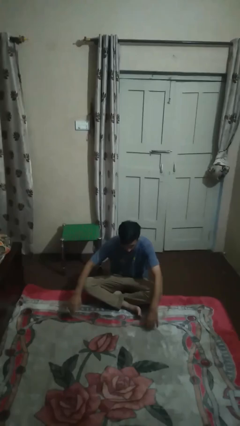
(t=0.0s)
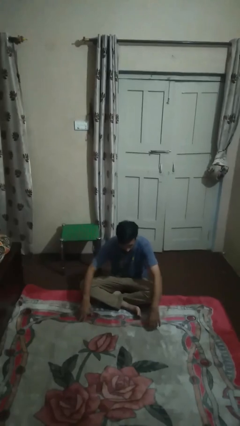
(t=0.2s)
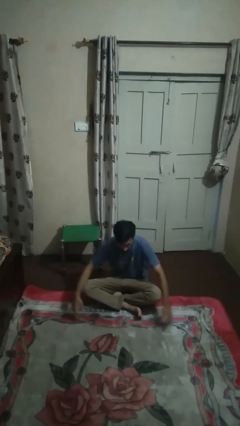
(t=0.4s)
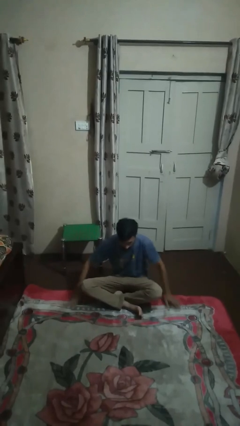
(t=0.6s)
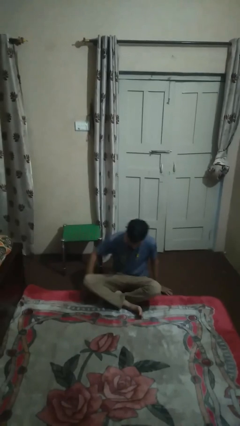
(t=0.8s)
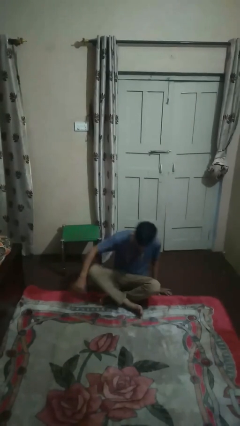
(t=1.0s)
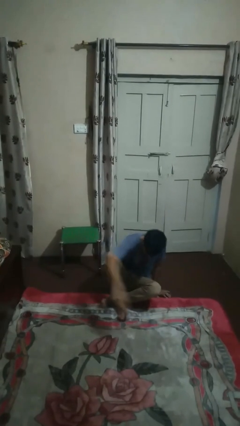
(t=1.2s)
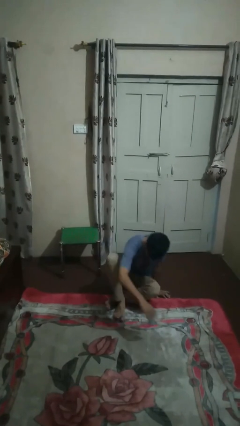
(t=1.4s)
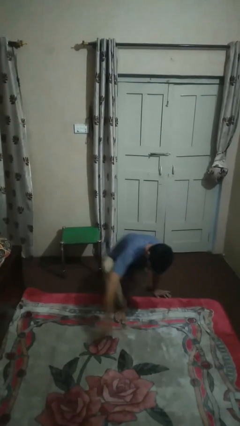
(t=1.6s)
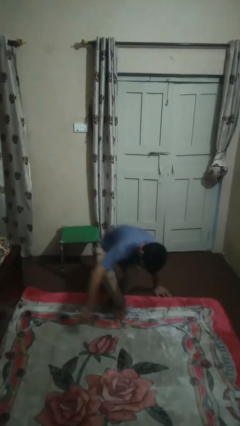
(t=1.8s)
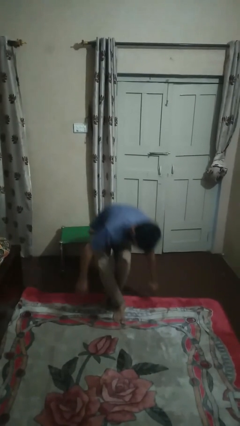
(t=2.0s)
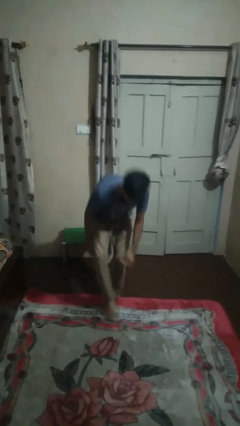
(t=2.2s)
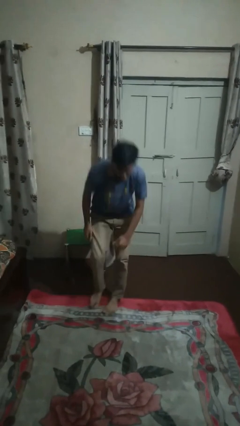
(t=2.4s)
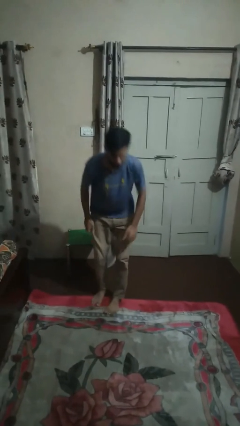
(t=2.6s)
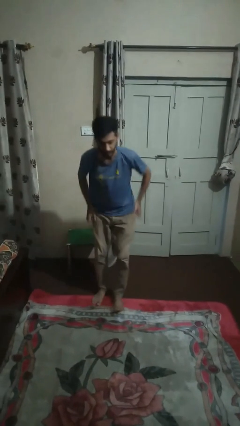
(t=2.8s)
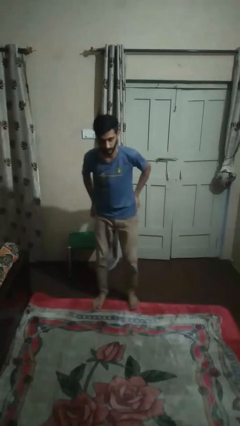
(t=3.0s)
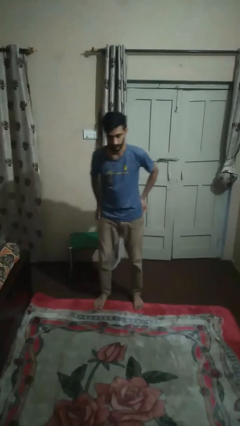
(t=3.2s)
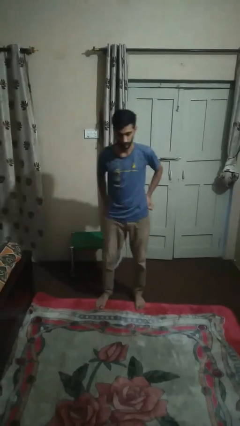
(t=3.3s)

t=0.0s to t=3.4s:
person stands up from floor

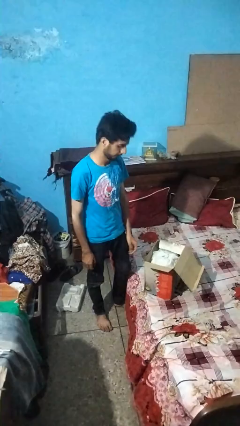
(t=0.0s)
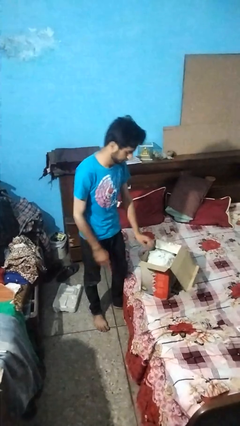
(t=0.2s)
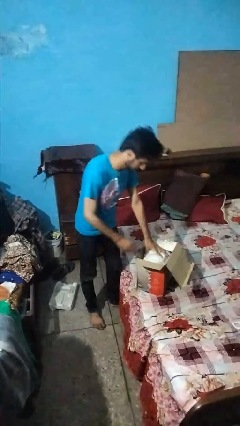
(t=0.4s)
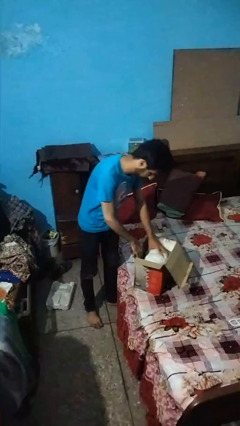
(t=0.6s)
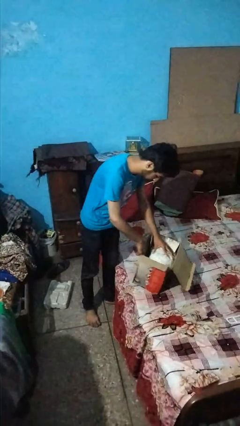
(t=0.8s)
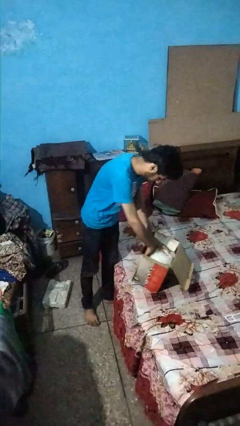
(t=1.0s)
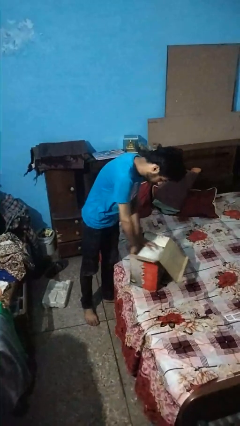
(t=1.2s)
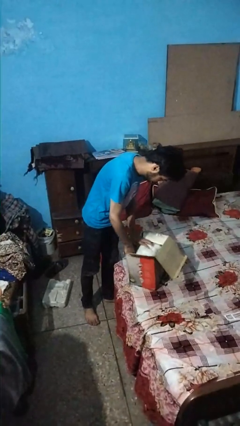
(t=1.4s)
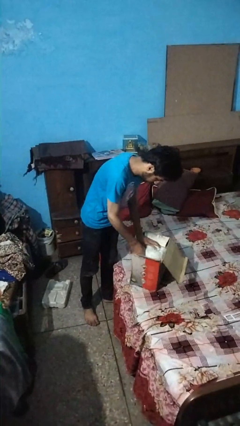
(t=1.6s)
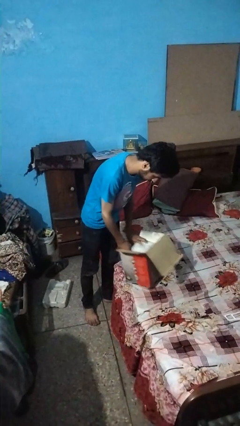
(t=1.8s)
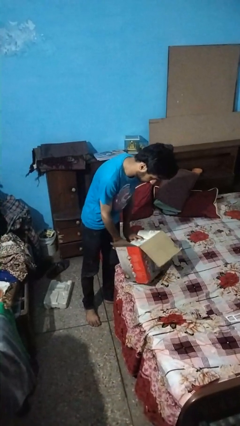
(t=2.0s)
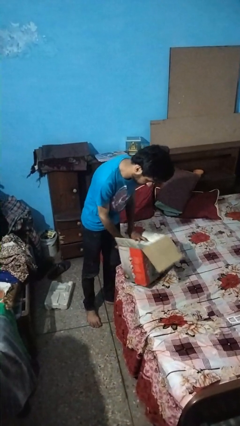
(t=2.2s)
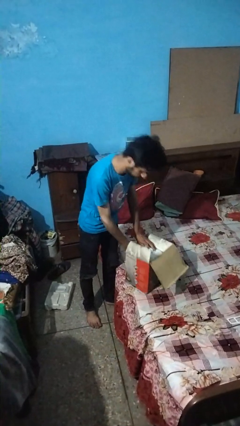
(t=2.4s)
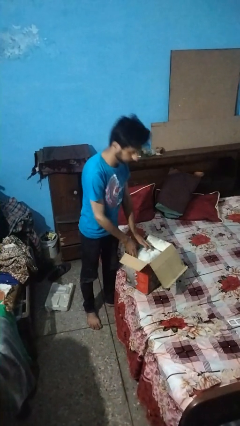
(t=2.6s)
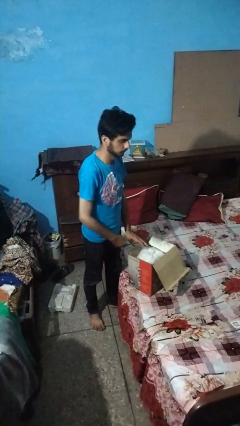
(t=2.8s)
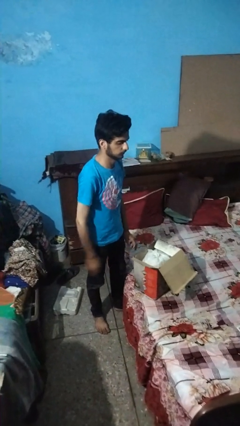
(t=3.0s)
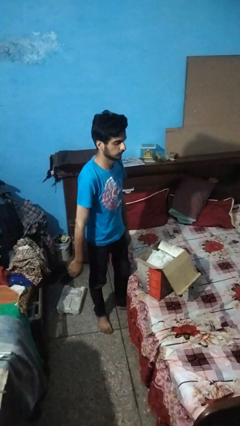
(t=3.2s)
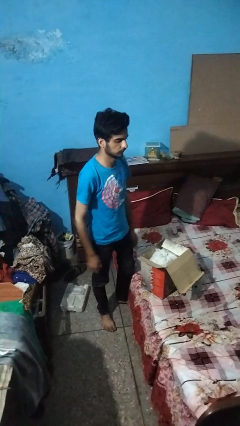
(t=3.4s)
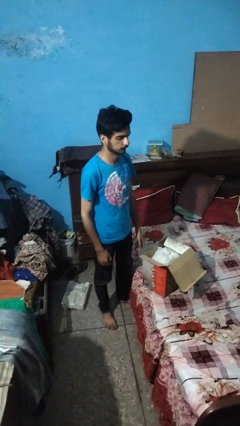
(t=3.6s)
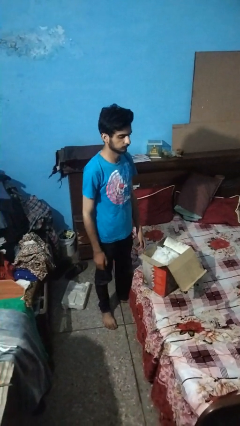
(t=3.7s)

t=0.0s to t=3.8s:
person searches in box

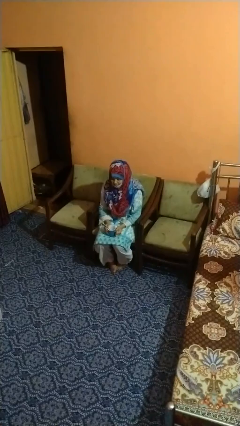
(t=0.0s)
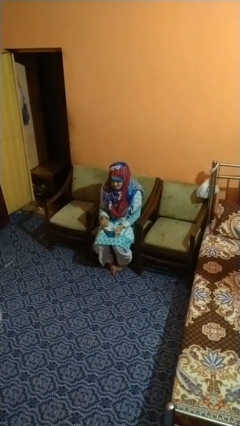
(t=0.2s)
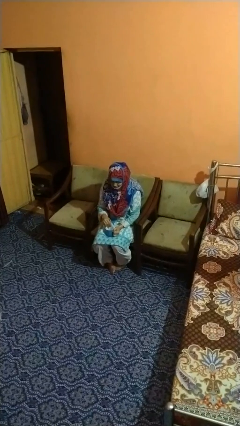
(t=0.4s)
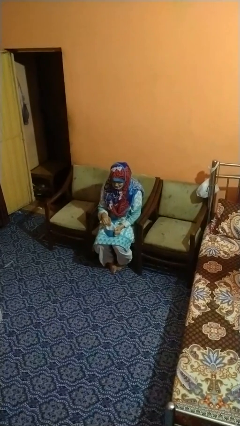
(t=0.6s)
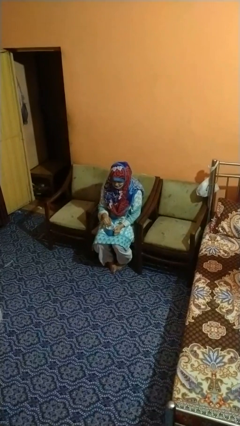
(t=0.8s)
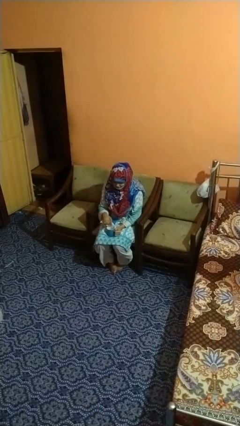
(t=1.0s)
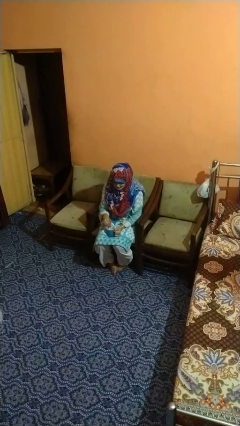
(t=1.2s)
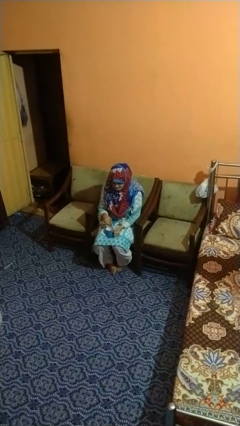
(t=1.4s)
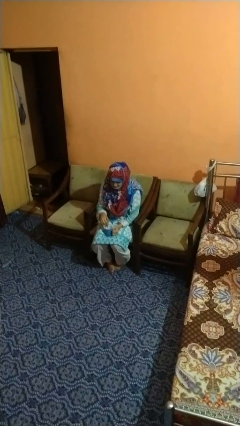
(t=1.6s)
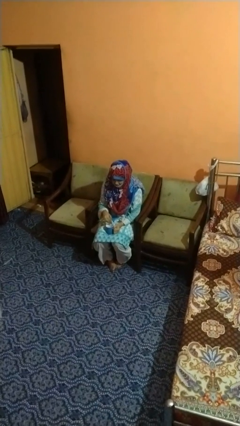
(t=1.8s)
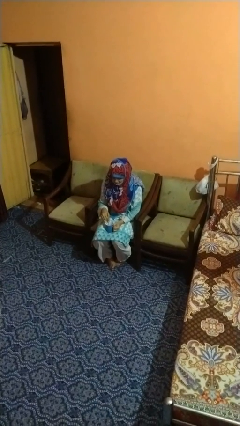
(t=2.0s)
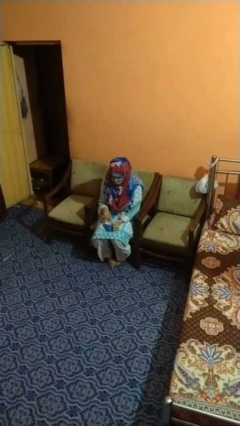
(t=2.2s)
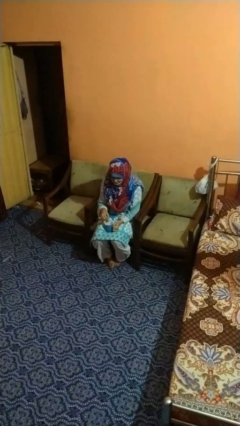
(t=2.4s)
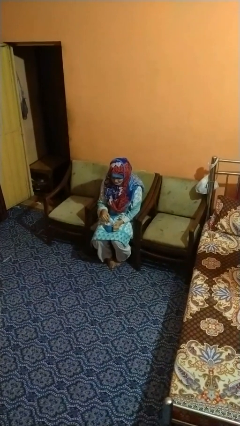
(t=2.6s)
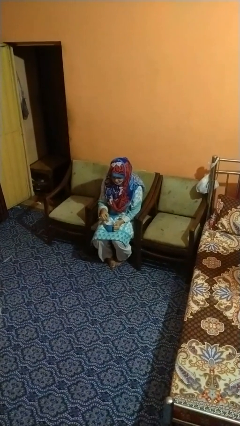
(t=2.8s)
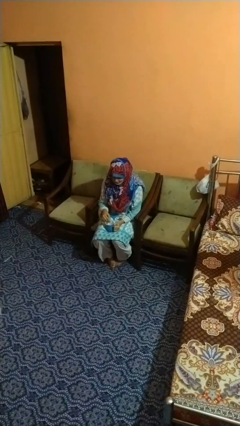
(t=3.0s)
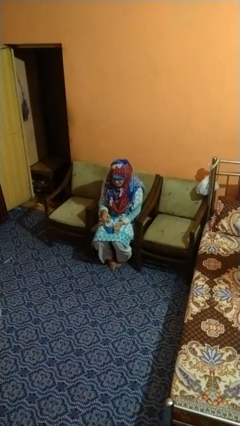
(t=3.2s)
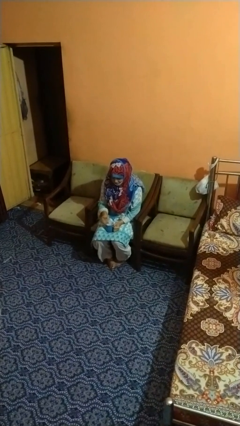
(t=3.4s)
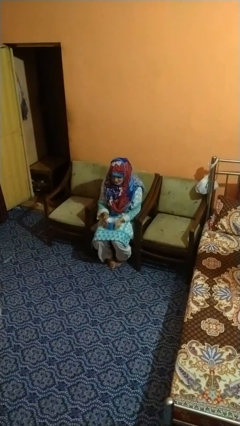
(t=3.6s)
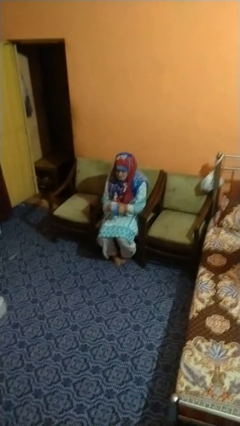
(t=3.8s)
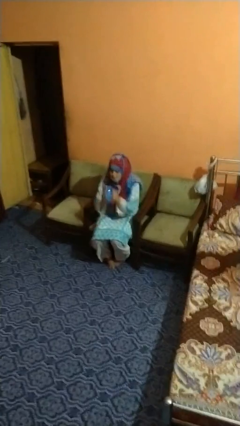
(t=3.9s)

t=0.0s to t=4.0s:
person stirs mug

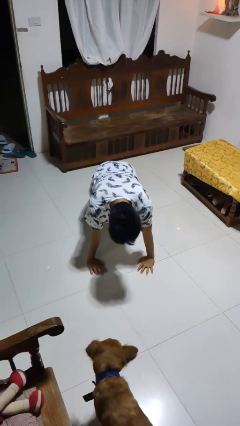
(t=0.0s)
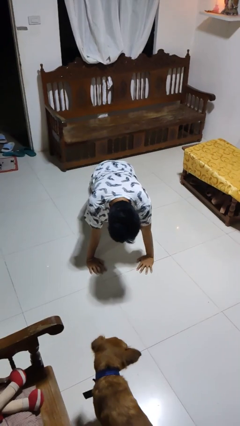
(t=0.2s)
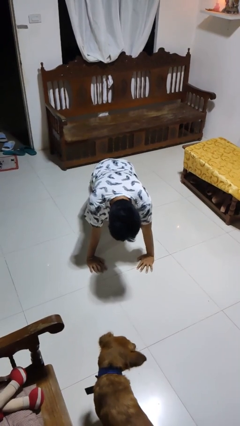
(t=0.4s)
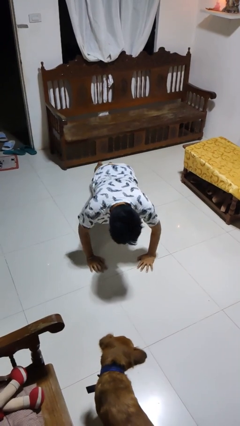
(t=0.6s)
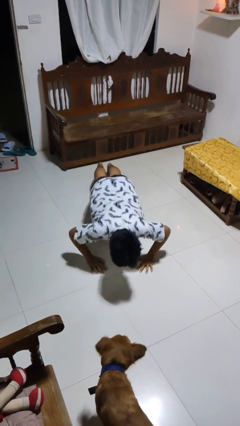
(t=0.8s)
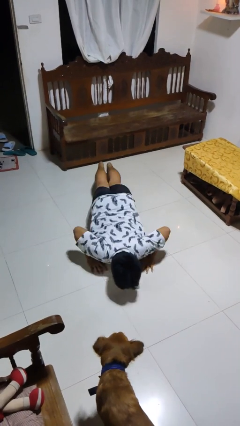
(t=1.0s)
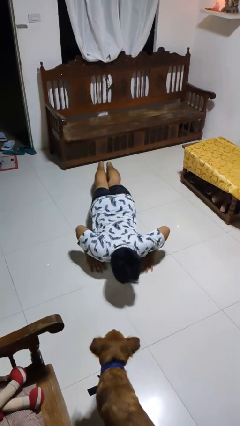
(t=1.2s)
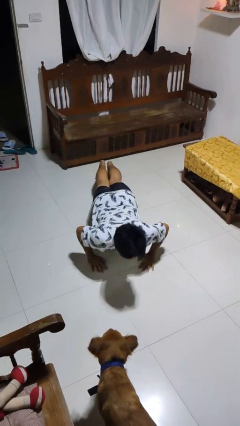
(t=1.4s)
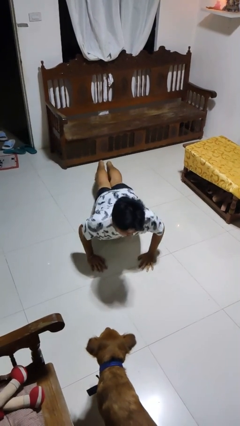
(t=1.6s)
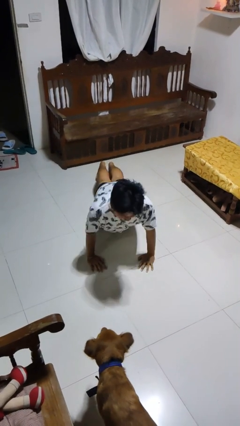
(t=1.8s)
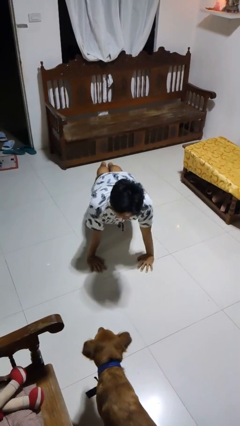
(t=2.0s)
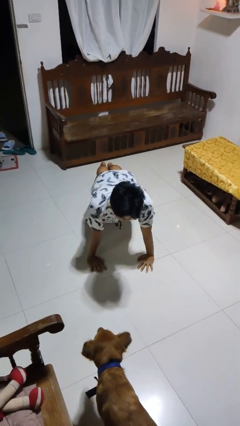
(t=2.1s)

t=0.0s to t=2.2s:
person exercises with pushup

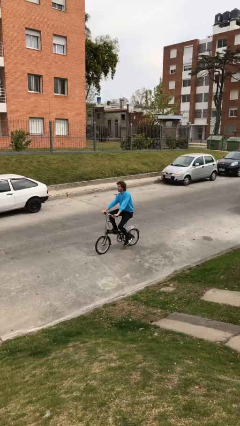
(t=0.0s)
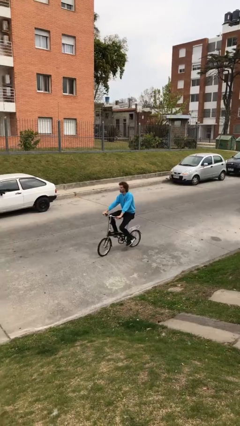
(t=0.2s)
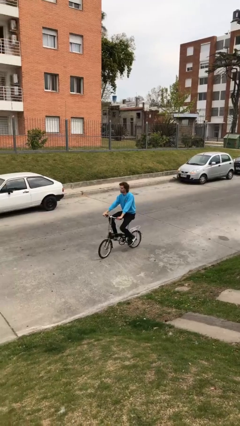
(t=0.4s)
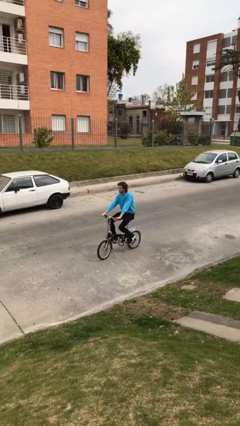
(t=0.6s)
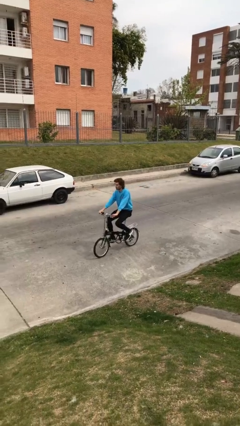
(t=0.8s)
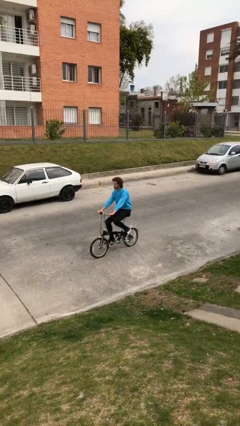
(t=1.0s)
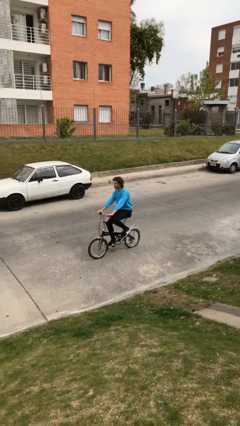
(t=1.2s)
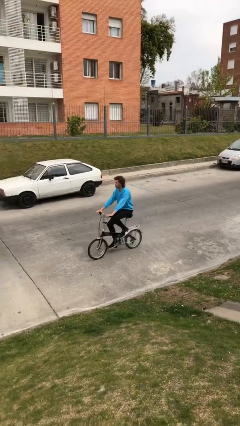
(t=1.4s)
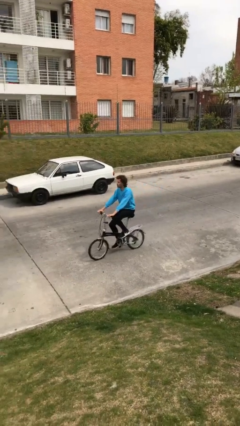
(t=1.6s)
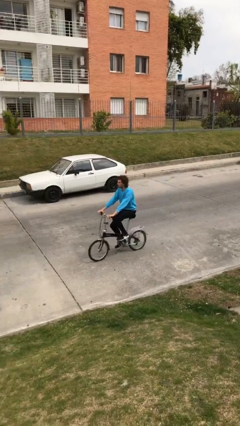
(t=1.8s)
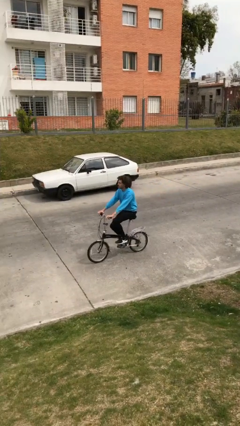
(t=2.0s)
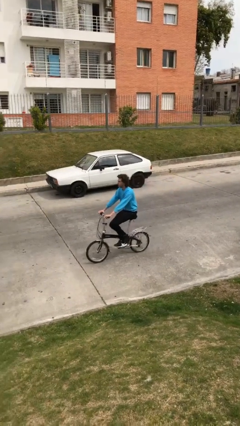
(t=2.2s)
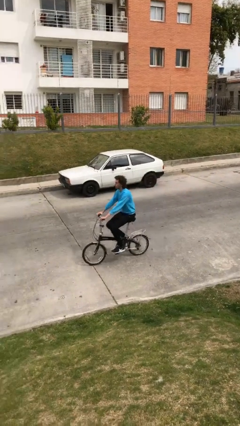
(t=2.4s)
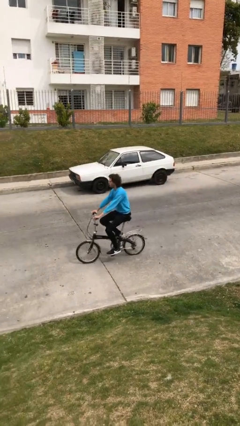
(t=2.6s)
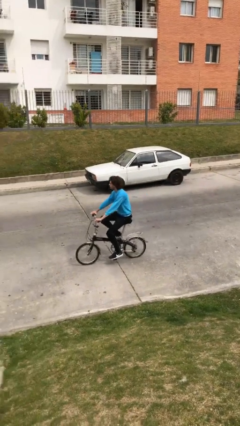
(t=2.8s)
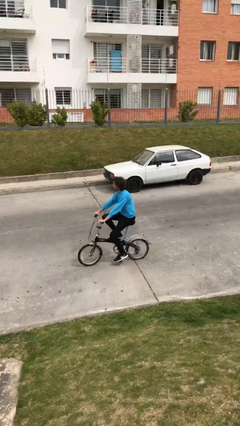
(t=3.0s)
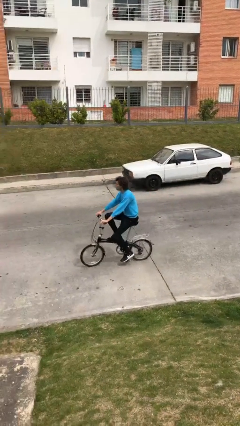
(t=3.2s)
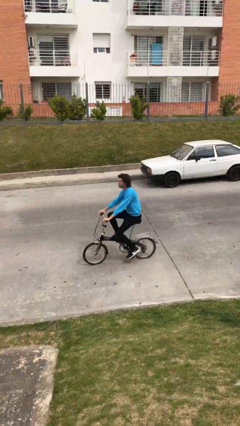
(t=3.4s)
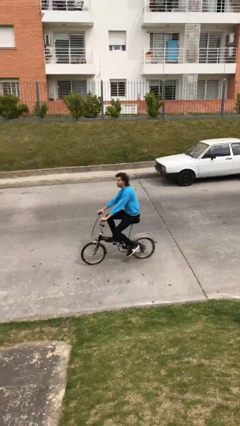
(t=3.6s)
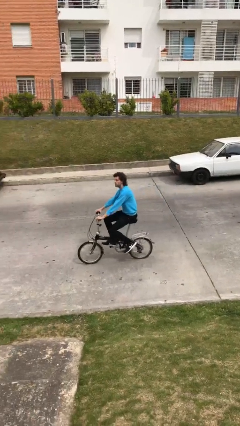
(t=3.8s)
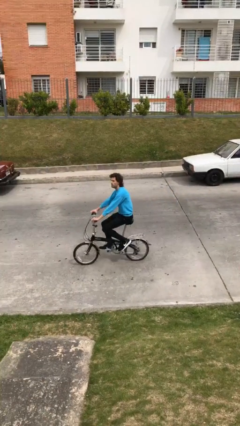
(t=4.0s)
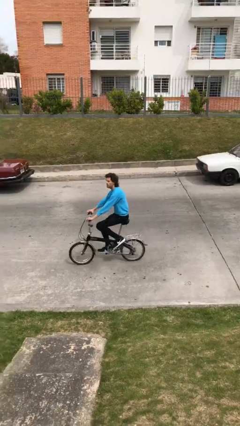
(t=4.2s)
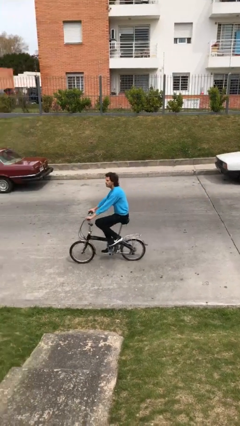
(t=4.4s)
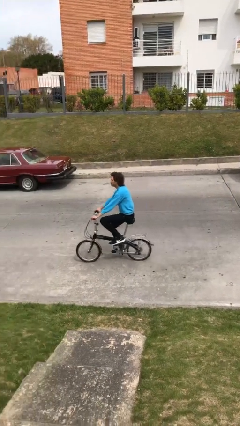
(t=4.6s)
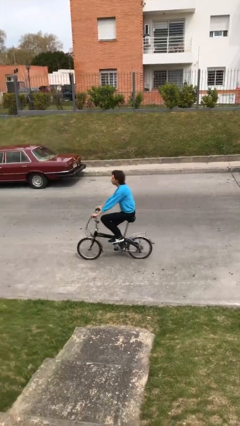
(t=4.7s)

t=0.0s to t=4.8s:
person rides bicycle
